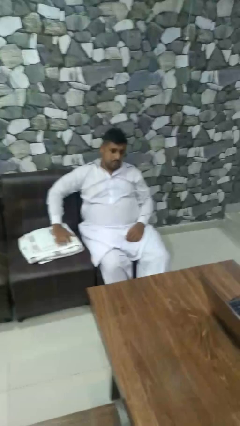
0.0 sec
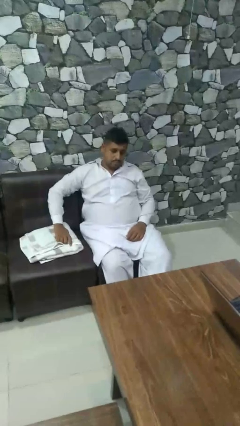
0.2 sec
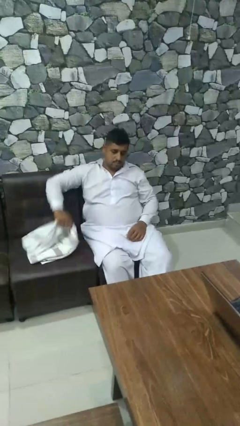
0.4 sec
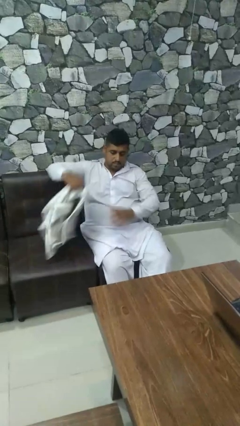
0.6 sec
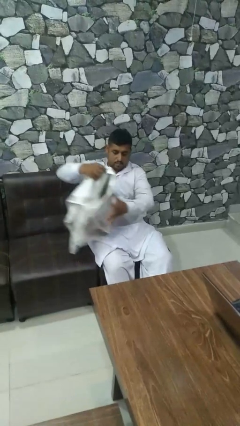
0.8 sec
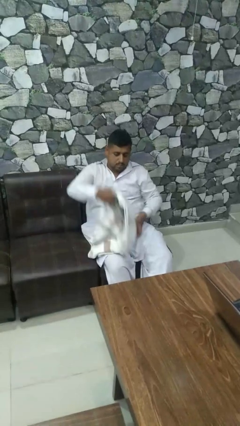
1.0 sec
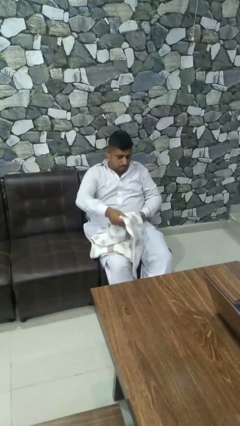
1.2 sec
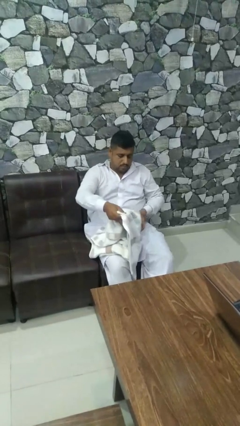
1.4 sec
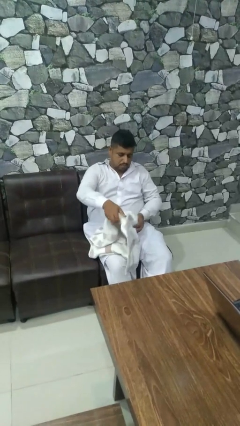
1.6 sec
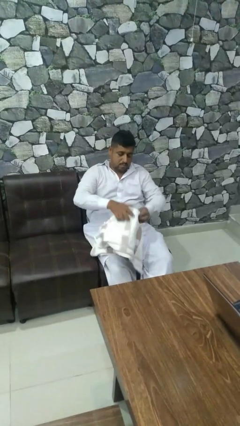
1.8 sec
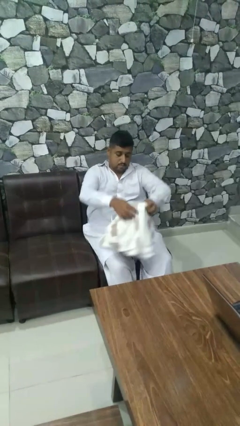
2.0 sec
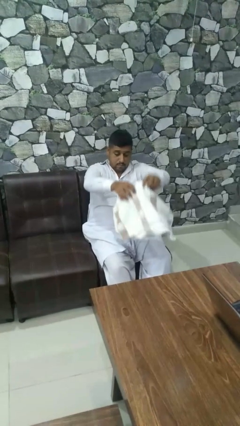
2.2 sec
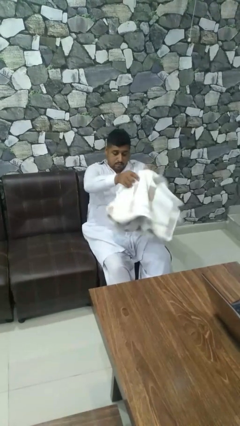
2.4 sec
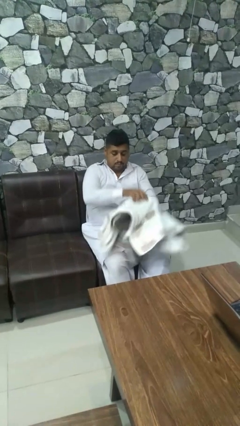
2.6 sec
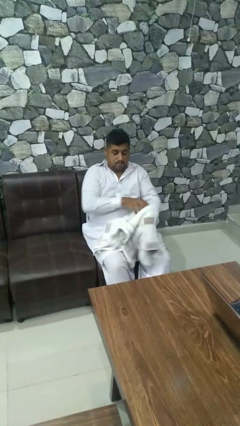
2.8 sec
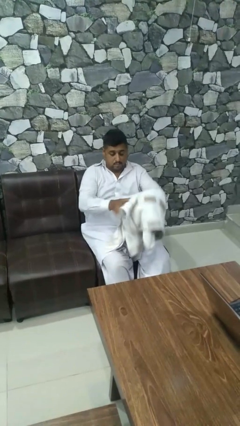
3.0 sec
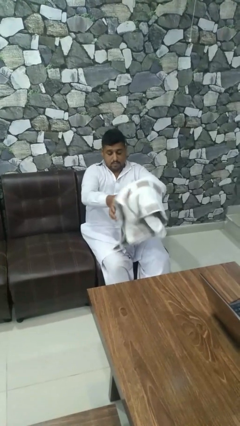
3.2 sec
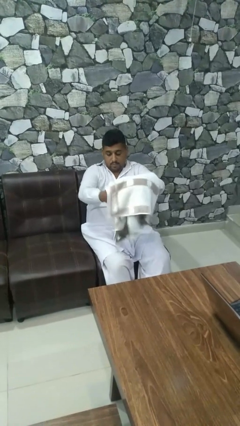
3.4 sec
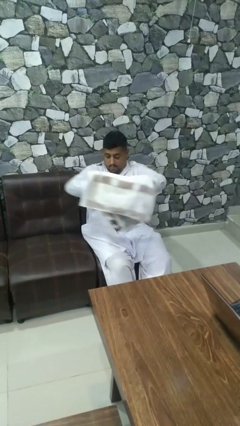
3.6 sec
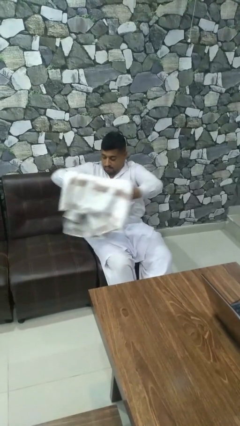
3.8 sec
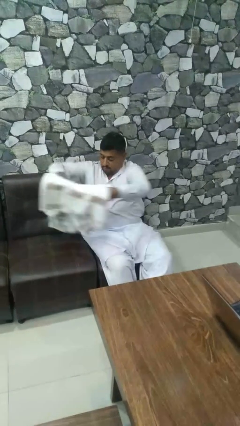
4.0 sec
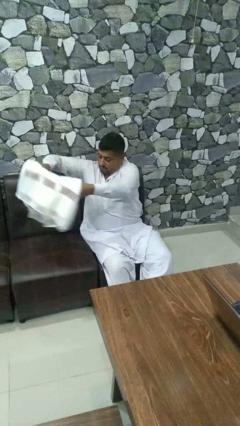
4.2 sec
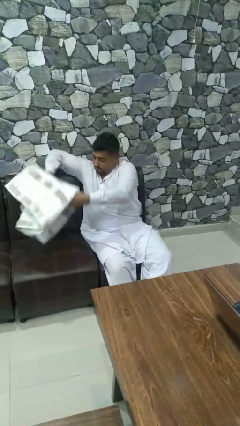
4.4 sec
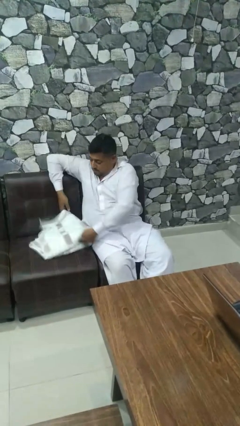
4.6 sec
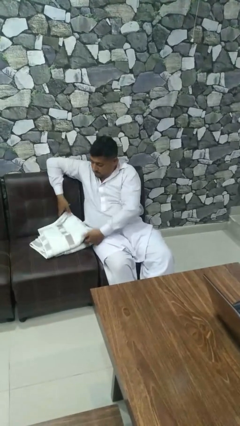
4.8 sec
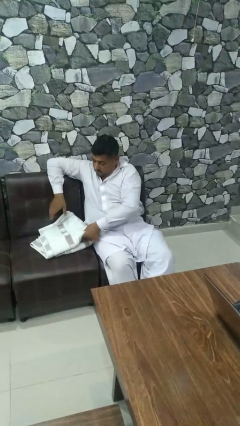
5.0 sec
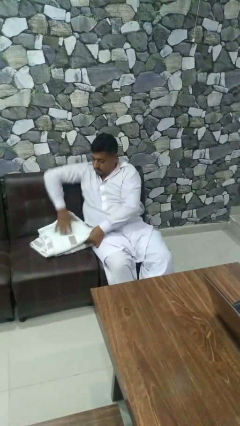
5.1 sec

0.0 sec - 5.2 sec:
person folds towel

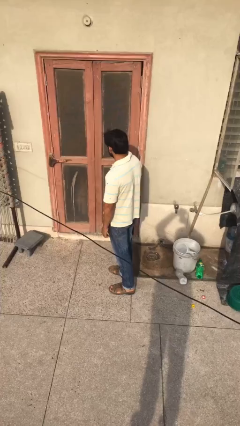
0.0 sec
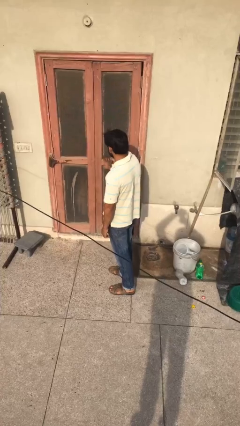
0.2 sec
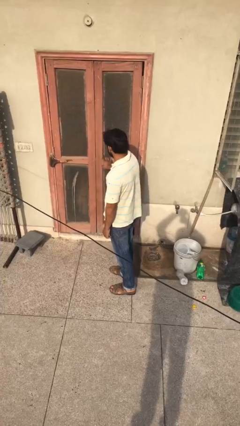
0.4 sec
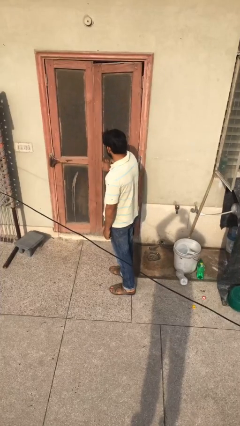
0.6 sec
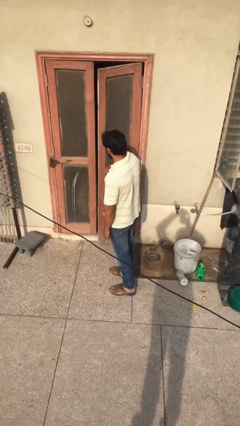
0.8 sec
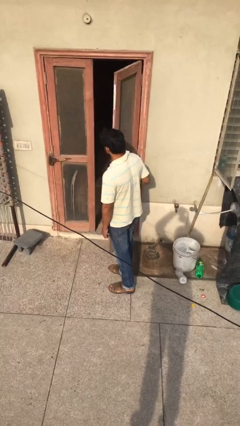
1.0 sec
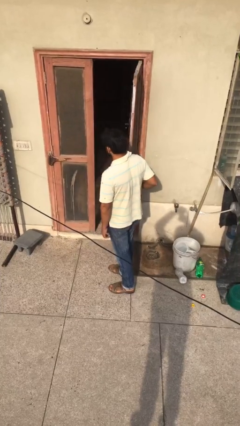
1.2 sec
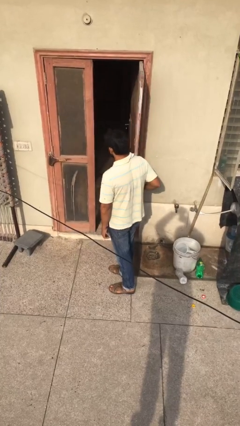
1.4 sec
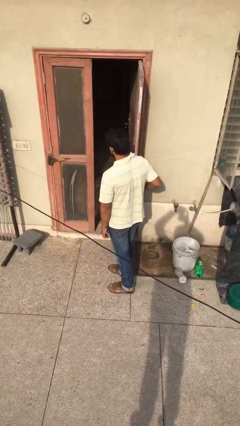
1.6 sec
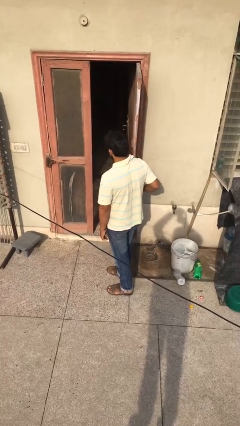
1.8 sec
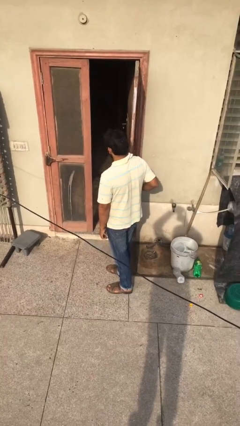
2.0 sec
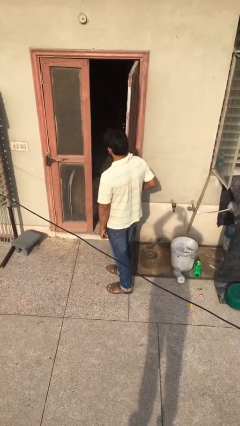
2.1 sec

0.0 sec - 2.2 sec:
person opens facility door

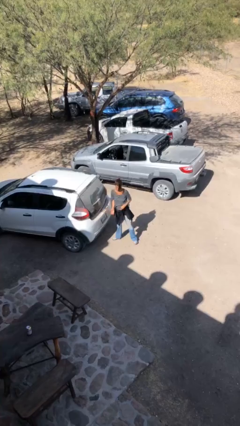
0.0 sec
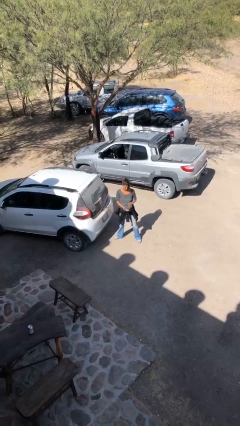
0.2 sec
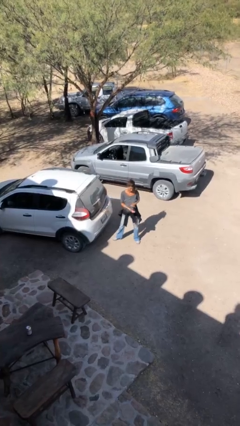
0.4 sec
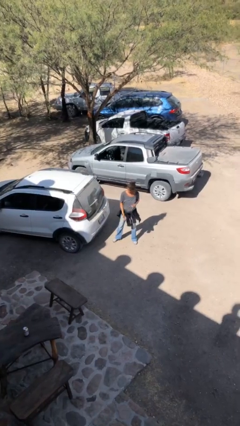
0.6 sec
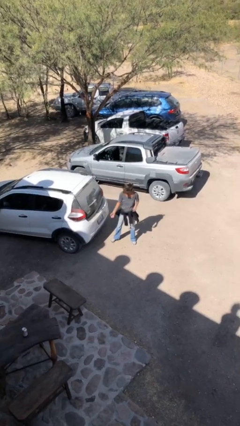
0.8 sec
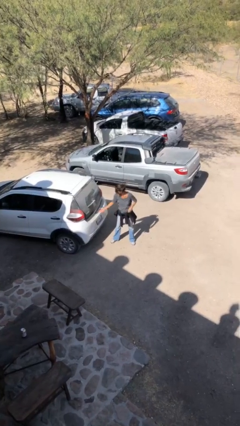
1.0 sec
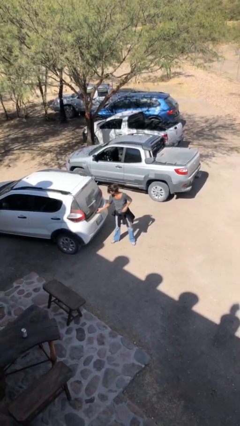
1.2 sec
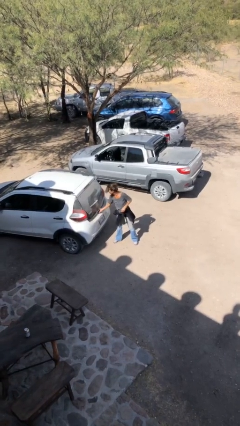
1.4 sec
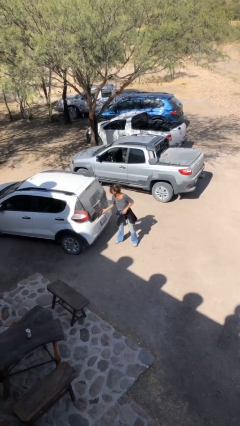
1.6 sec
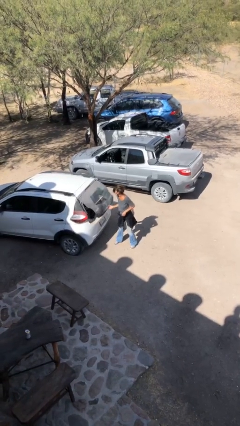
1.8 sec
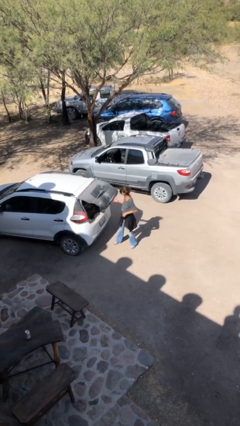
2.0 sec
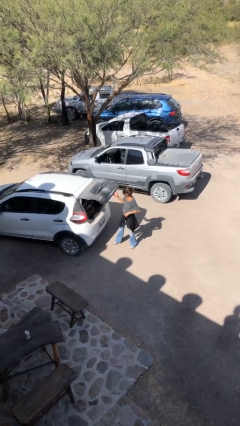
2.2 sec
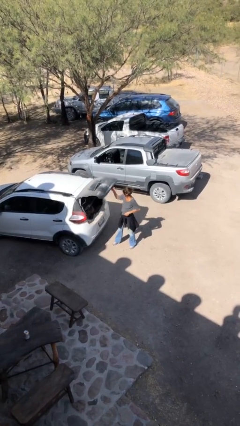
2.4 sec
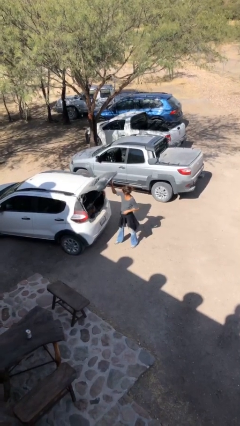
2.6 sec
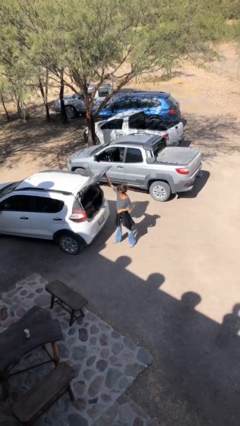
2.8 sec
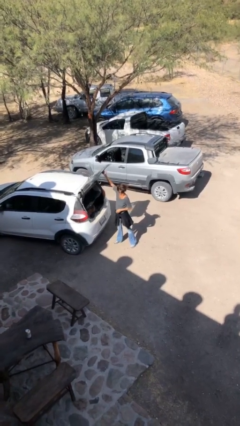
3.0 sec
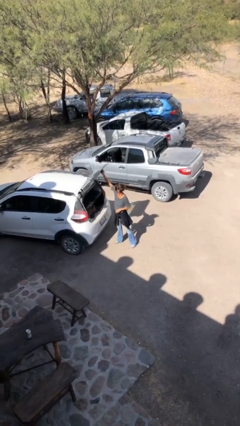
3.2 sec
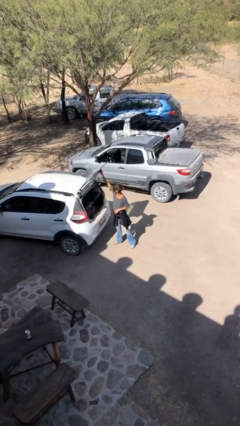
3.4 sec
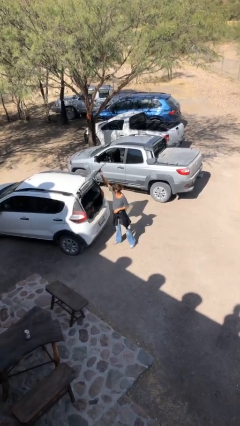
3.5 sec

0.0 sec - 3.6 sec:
person opens car trunk

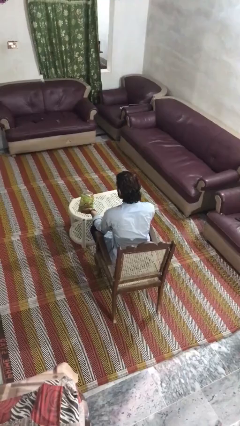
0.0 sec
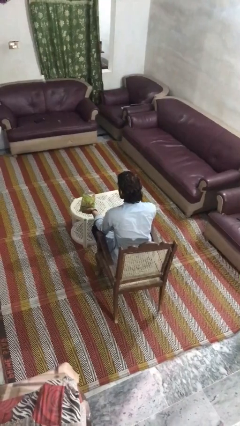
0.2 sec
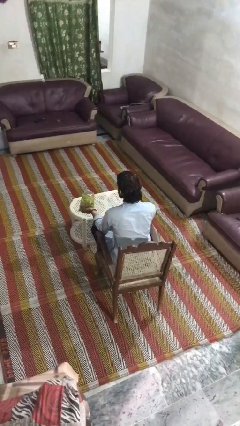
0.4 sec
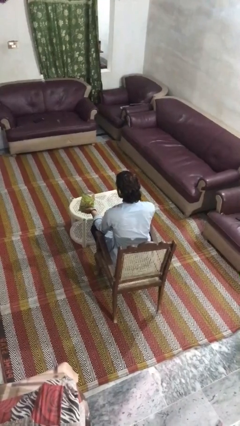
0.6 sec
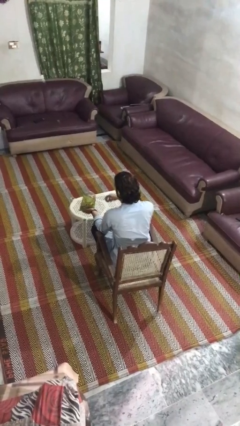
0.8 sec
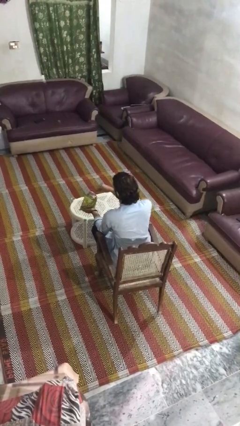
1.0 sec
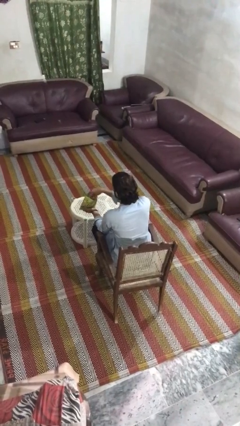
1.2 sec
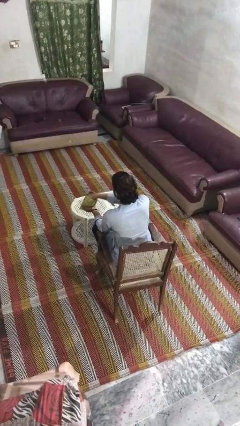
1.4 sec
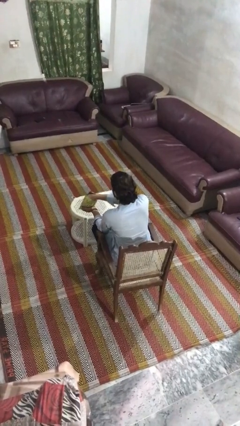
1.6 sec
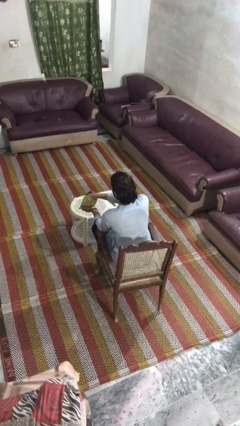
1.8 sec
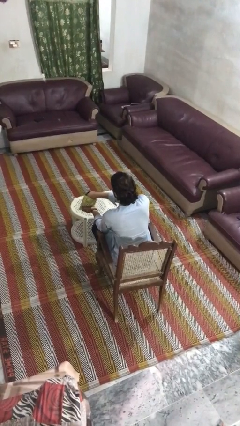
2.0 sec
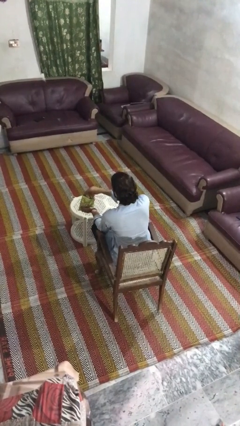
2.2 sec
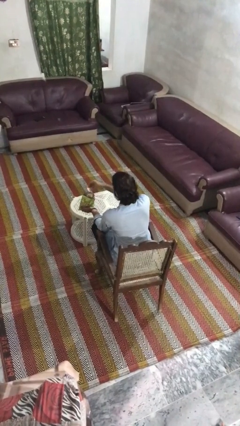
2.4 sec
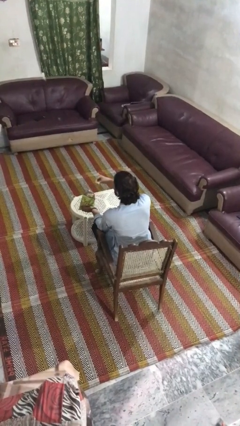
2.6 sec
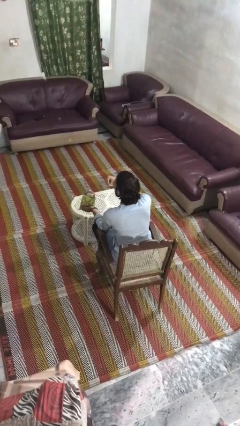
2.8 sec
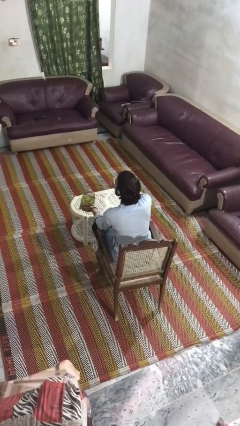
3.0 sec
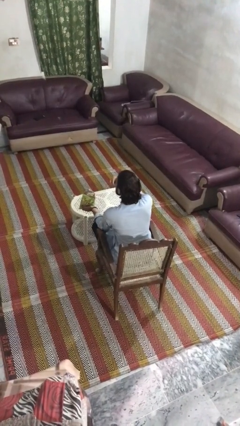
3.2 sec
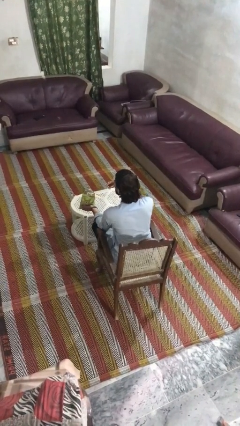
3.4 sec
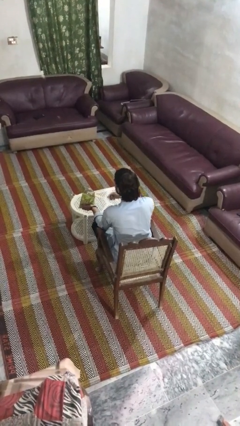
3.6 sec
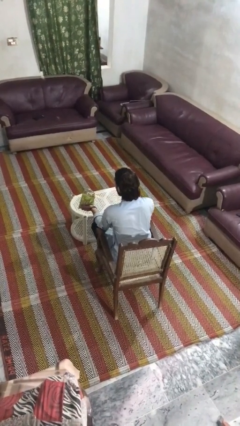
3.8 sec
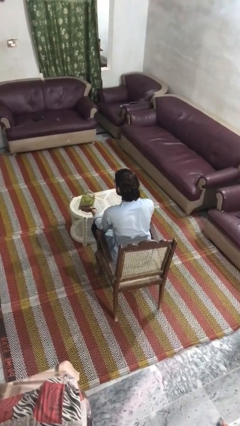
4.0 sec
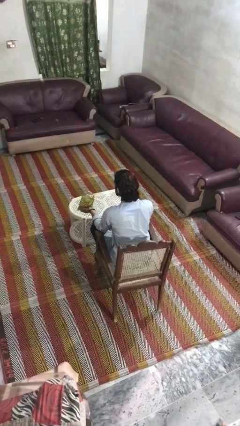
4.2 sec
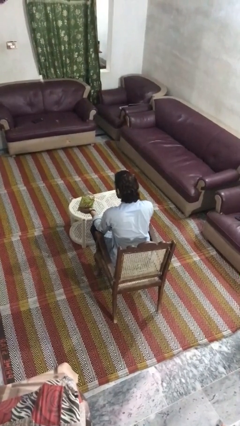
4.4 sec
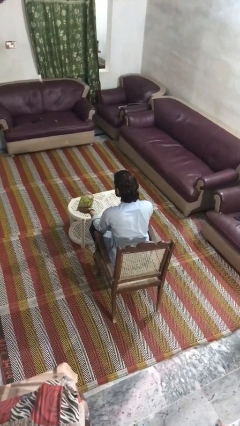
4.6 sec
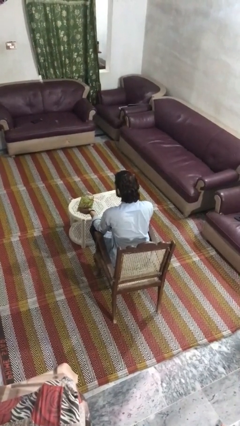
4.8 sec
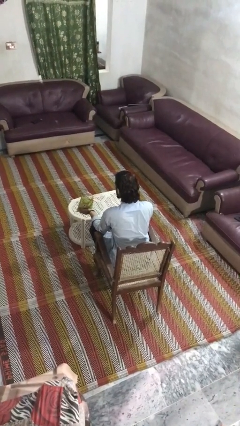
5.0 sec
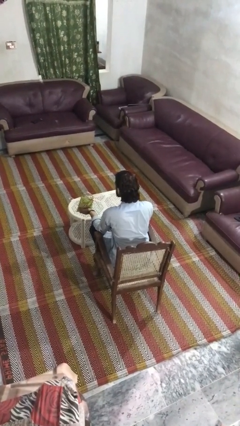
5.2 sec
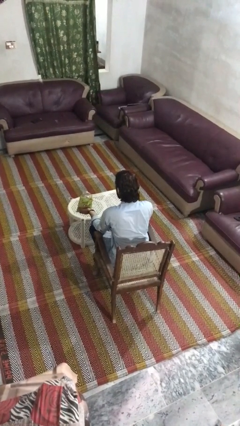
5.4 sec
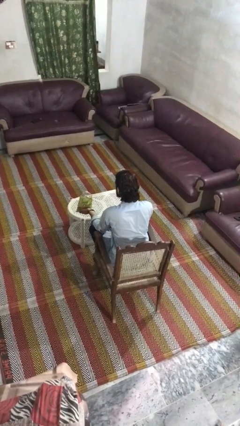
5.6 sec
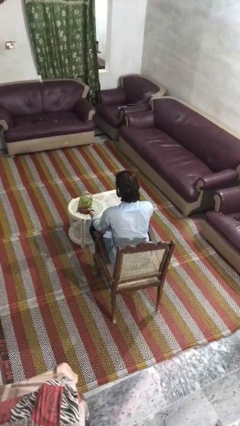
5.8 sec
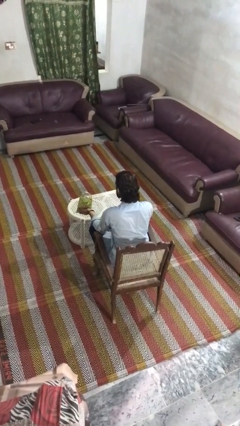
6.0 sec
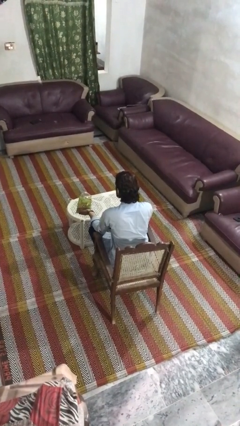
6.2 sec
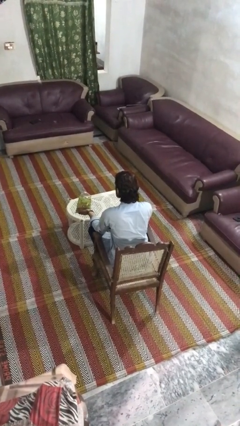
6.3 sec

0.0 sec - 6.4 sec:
person eats snack from bag

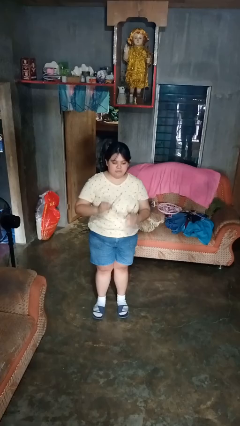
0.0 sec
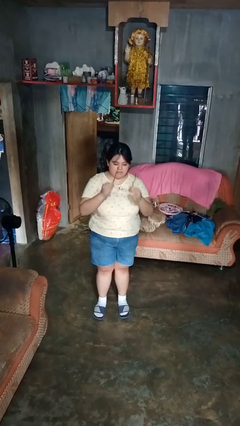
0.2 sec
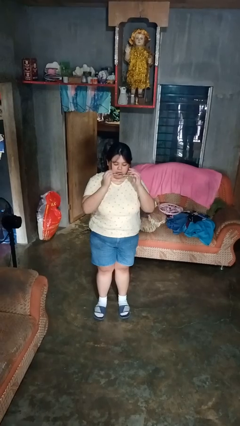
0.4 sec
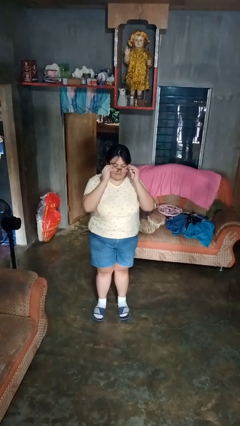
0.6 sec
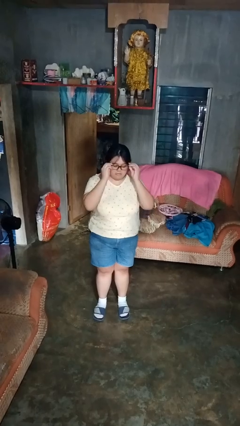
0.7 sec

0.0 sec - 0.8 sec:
person puts on glasses
